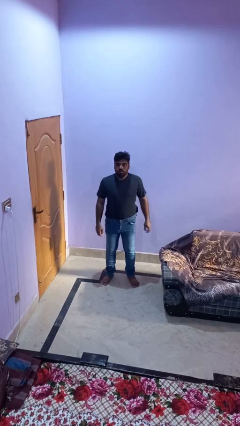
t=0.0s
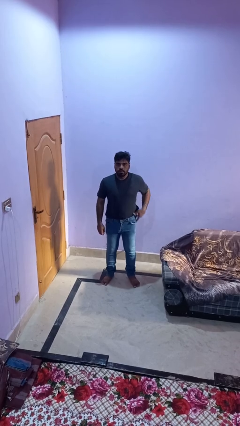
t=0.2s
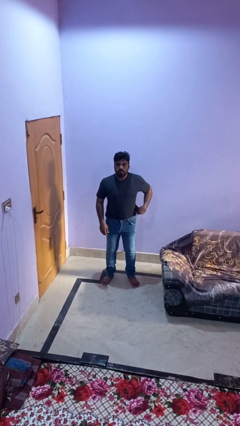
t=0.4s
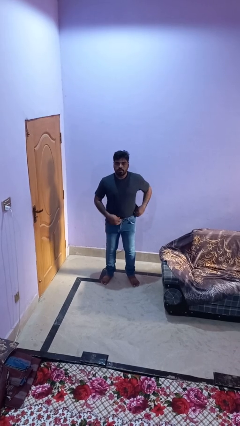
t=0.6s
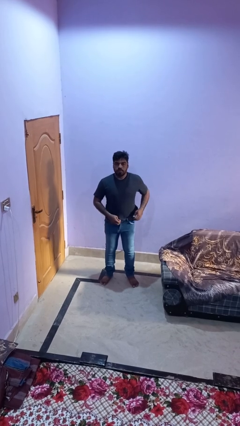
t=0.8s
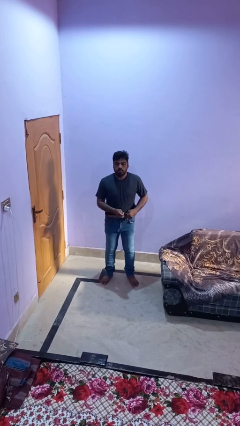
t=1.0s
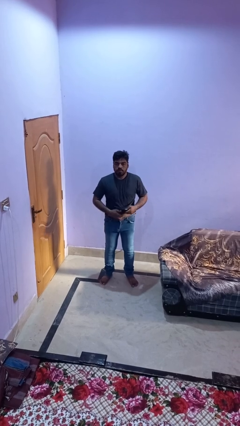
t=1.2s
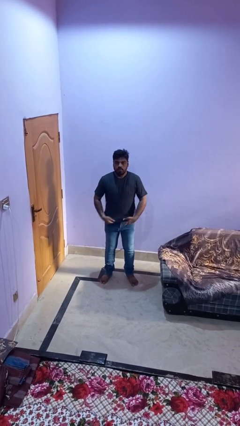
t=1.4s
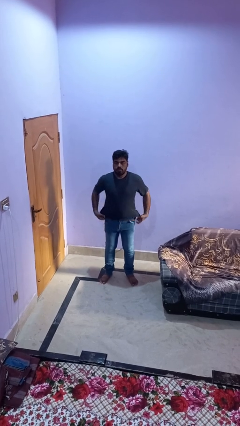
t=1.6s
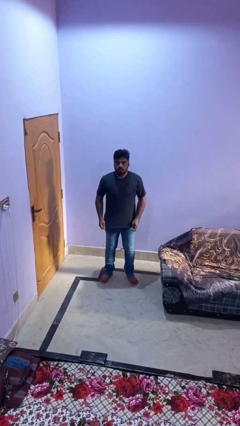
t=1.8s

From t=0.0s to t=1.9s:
person untucks shirt

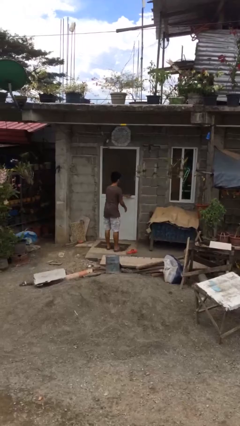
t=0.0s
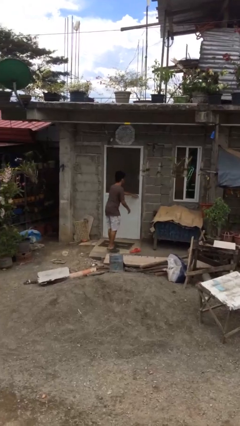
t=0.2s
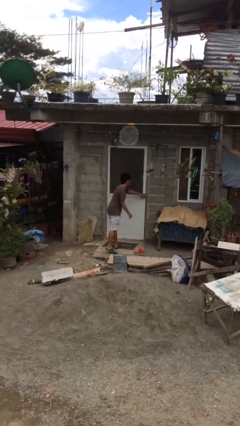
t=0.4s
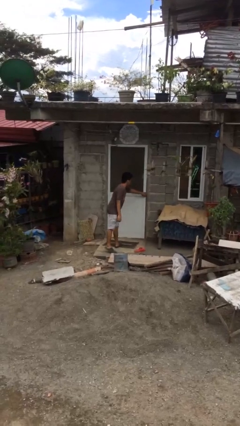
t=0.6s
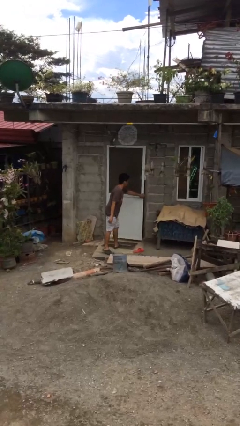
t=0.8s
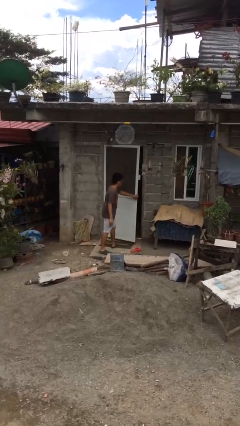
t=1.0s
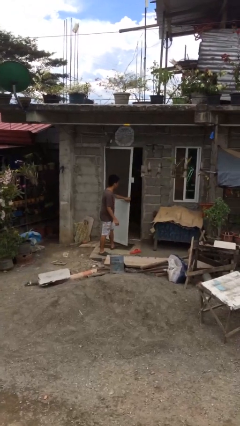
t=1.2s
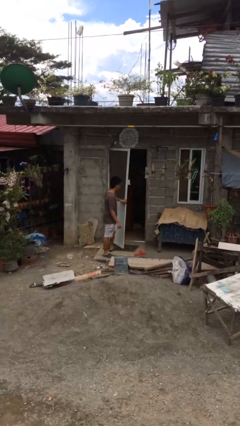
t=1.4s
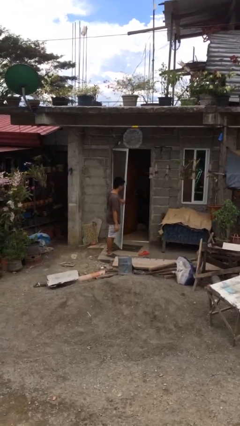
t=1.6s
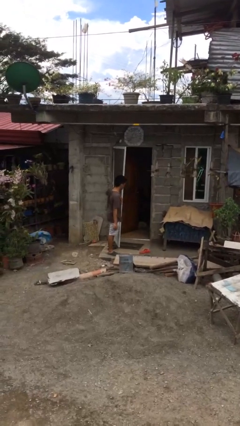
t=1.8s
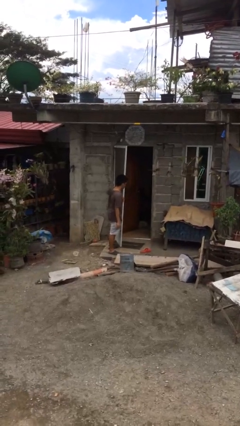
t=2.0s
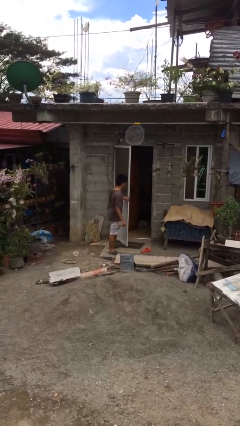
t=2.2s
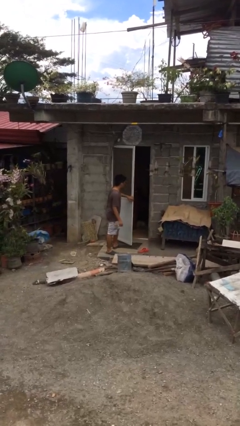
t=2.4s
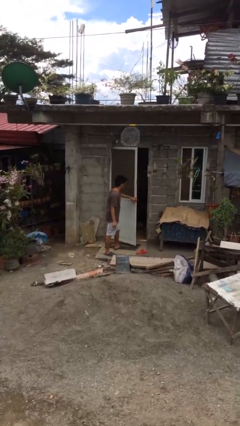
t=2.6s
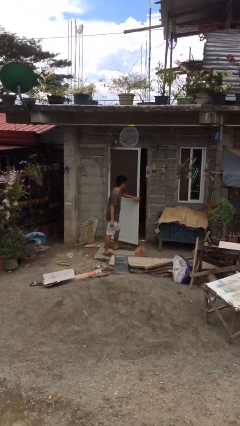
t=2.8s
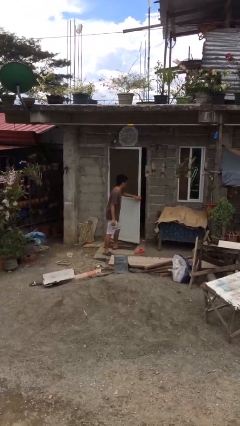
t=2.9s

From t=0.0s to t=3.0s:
person opens facility door

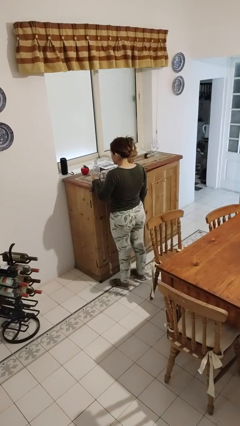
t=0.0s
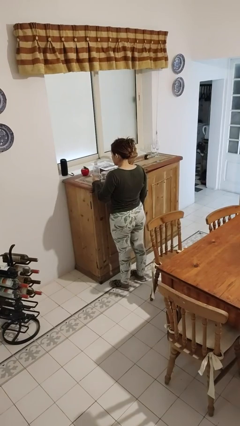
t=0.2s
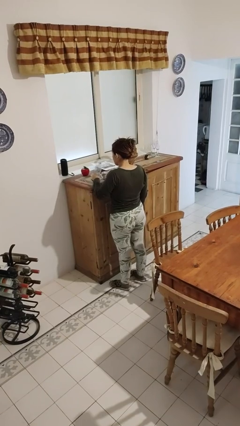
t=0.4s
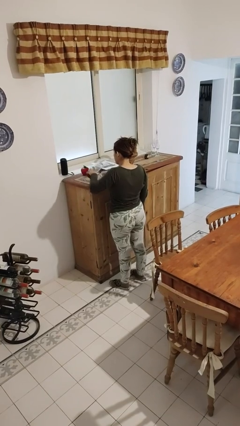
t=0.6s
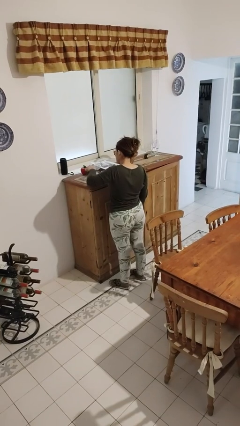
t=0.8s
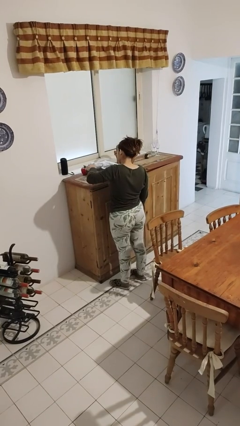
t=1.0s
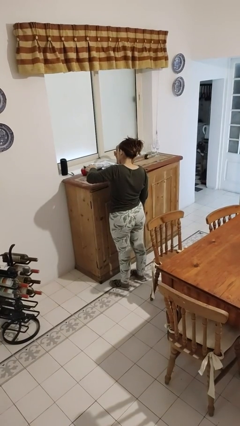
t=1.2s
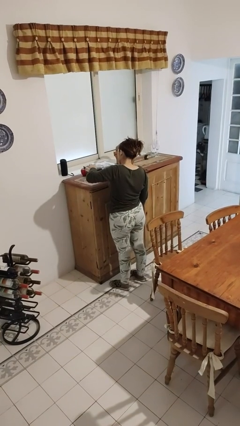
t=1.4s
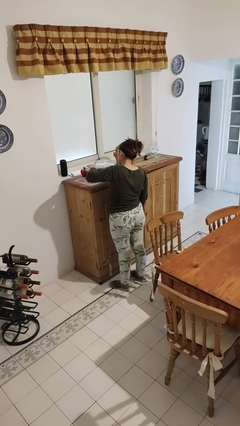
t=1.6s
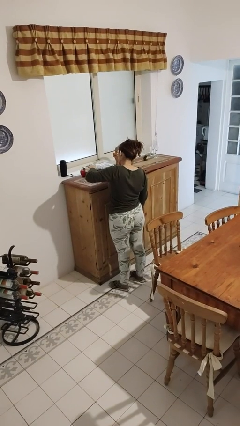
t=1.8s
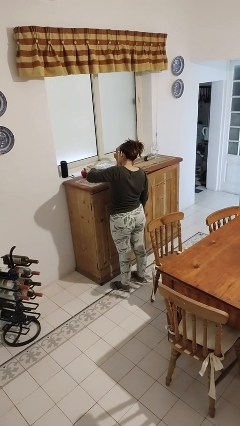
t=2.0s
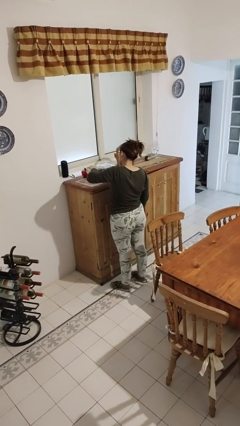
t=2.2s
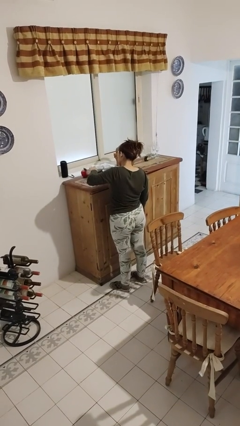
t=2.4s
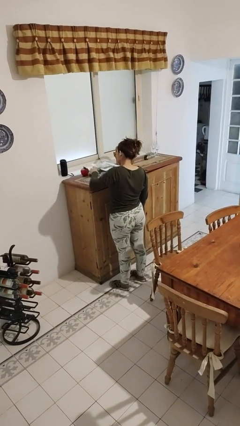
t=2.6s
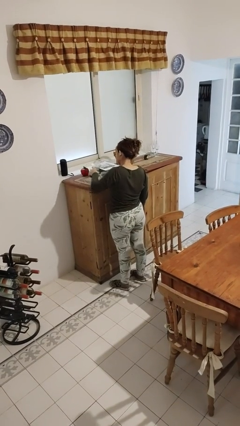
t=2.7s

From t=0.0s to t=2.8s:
person pours liquid into cup

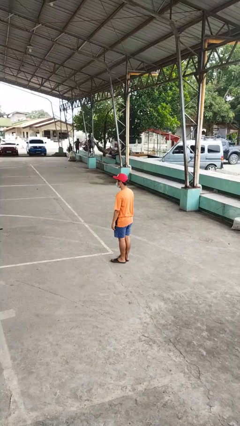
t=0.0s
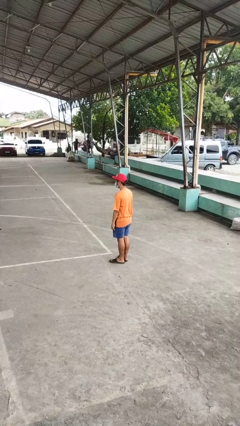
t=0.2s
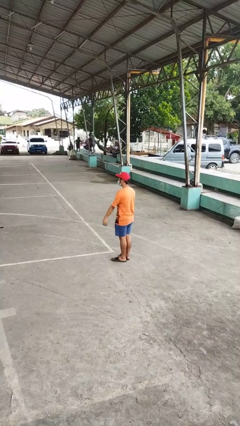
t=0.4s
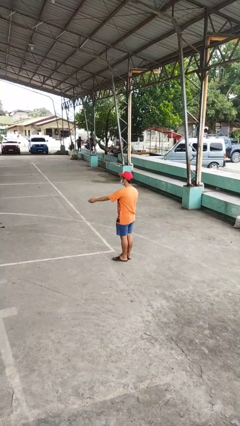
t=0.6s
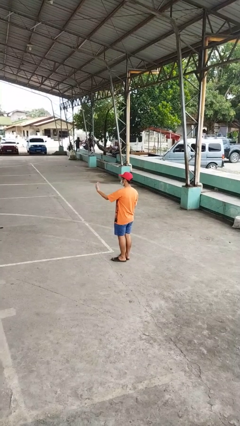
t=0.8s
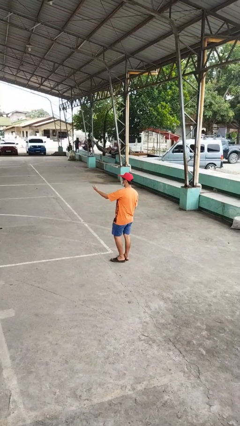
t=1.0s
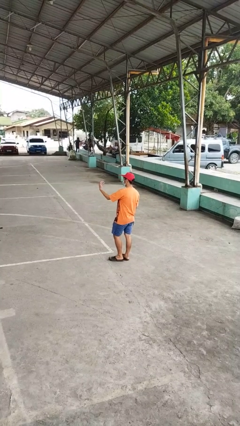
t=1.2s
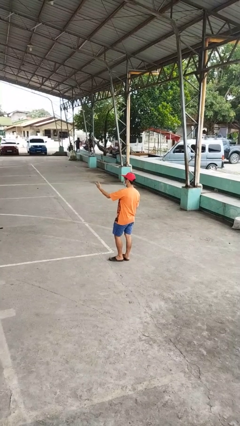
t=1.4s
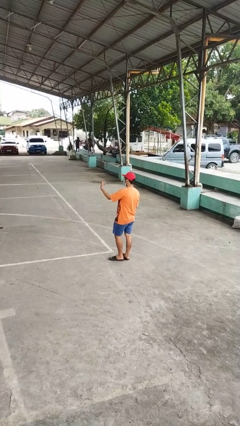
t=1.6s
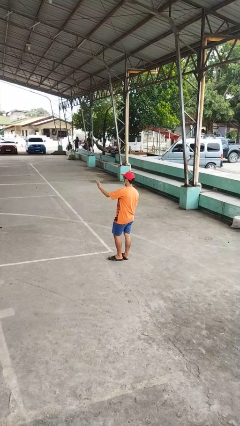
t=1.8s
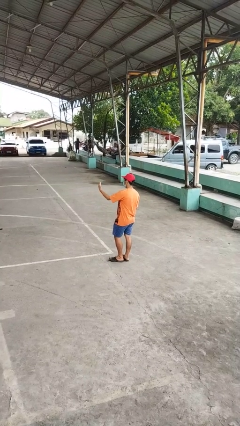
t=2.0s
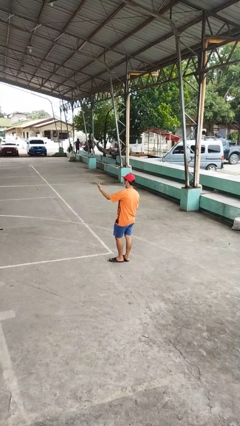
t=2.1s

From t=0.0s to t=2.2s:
person gestures come here

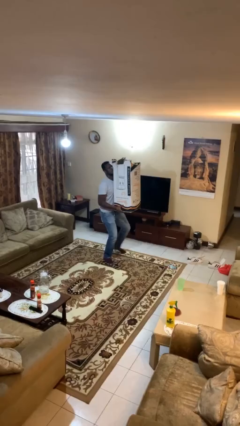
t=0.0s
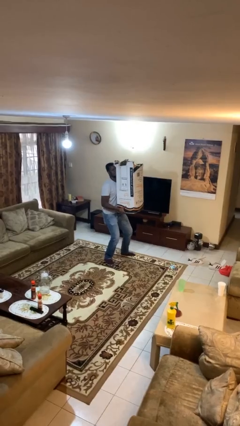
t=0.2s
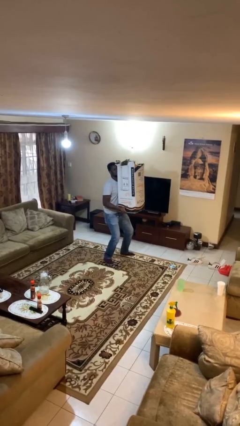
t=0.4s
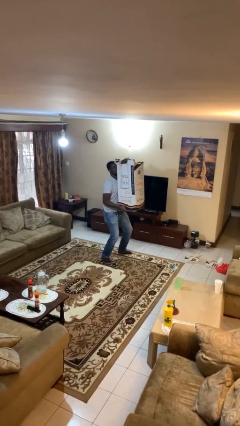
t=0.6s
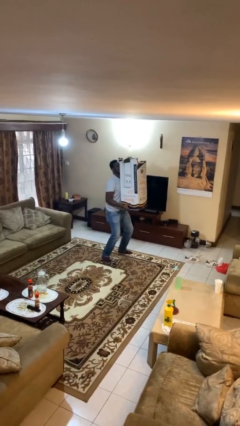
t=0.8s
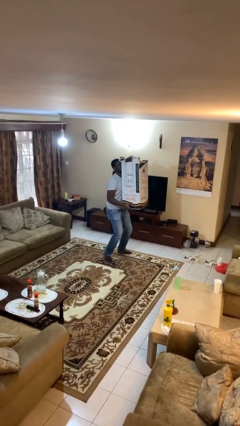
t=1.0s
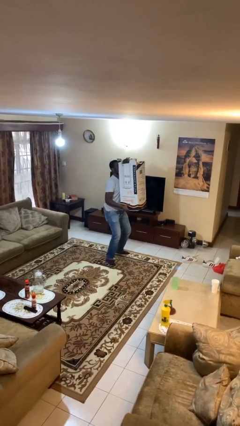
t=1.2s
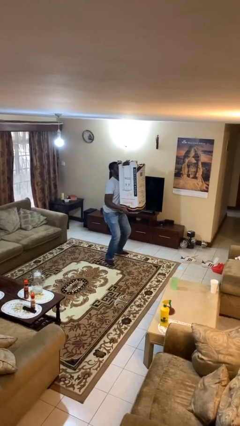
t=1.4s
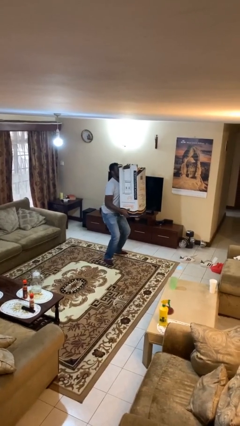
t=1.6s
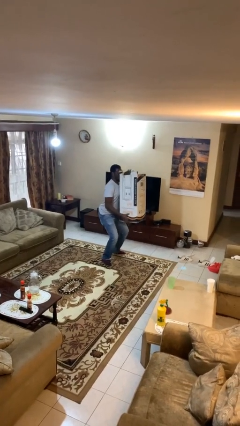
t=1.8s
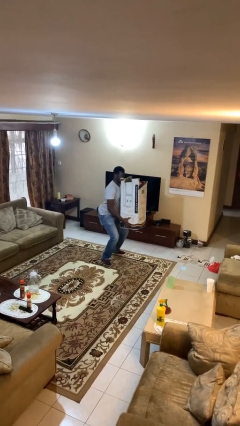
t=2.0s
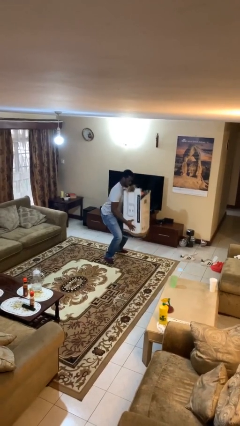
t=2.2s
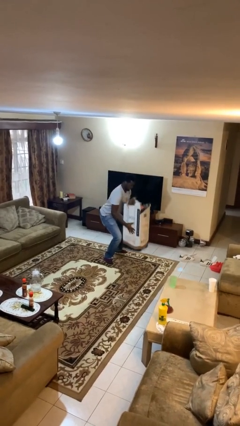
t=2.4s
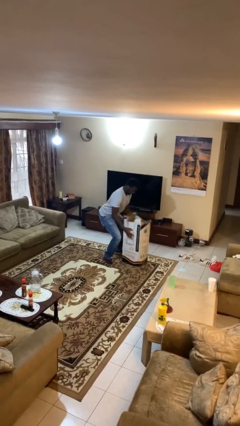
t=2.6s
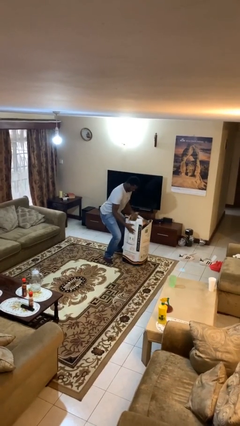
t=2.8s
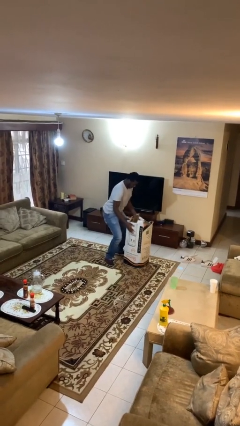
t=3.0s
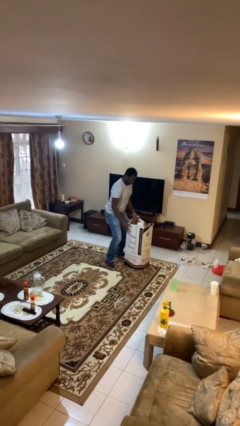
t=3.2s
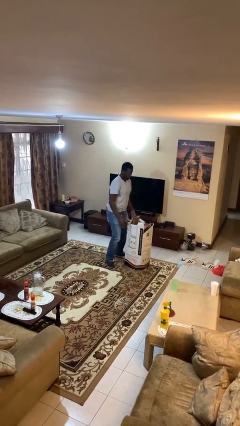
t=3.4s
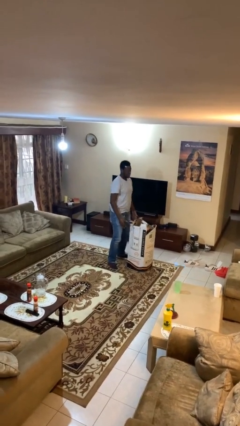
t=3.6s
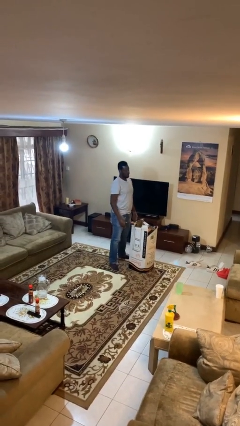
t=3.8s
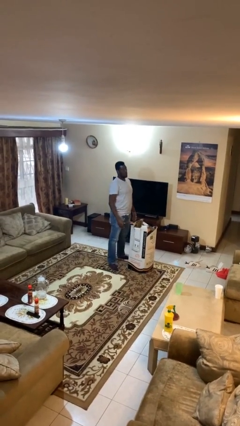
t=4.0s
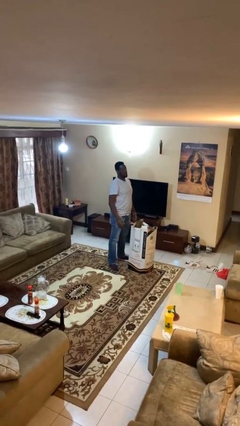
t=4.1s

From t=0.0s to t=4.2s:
person puts down object on floor

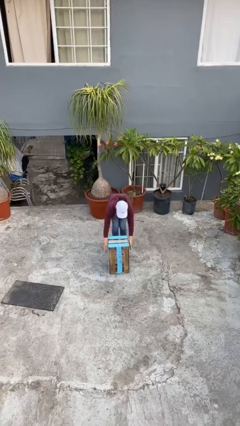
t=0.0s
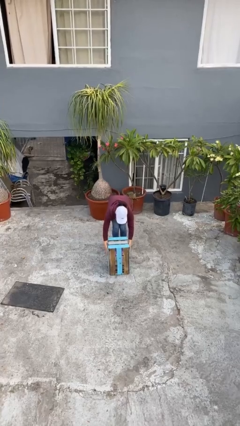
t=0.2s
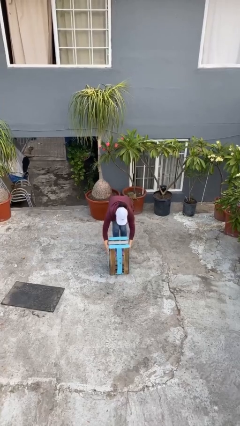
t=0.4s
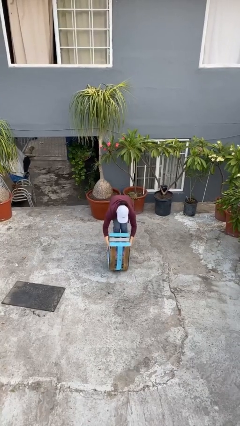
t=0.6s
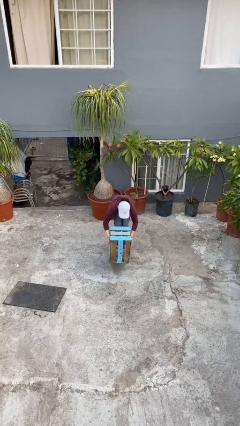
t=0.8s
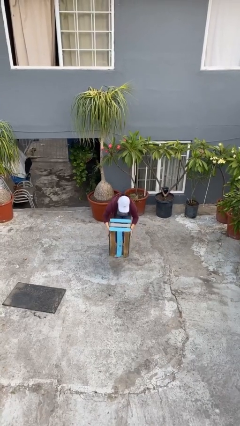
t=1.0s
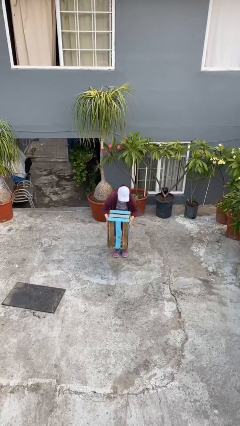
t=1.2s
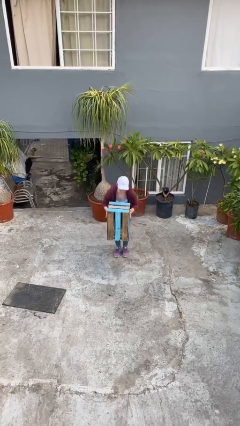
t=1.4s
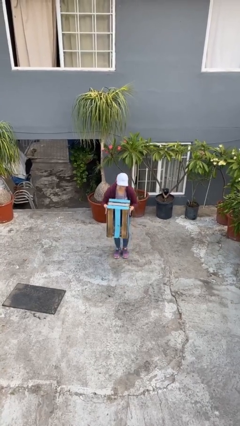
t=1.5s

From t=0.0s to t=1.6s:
person picks up object from floor

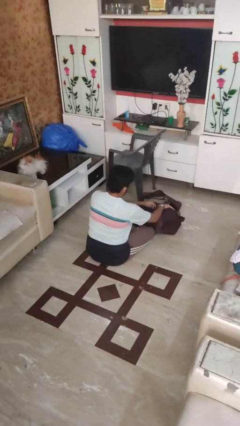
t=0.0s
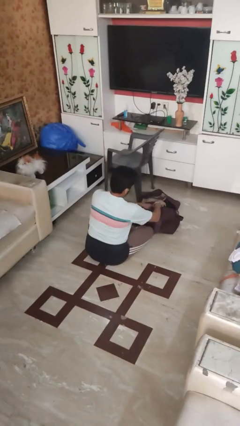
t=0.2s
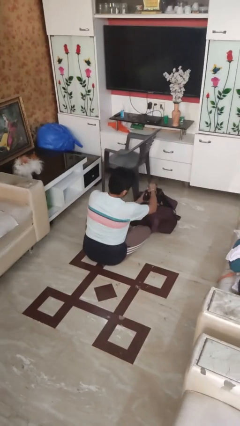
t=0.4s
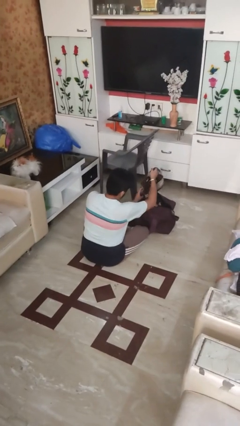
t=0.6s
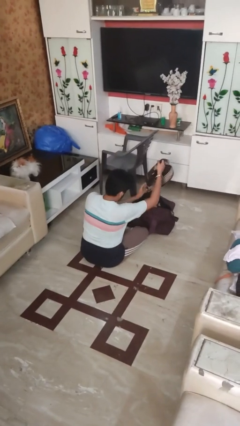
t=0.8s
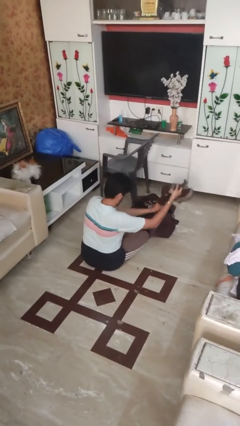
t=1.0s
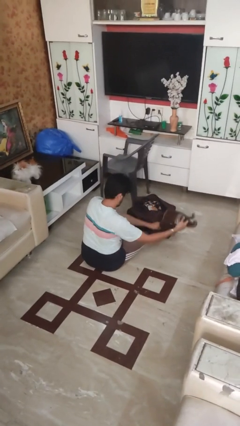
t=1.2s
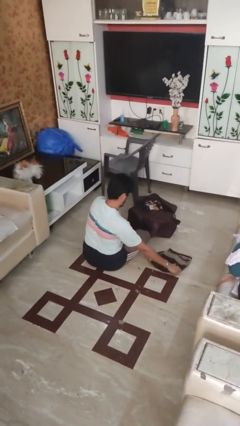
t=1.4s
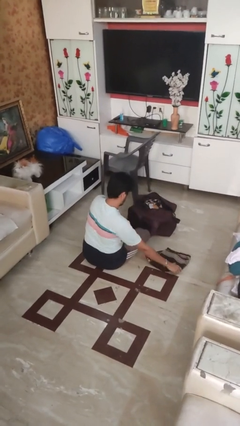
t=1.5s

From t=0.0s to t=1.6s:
person unloads clothes from suitcase
